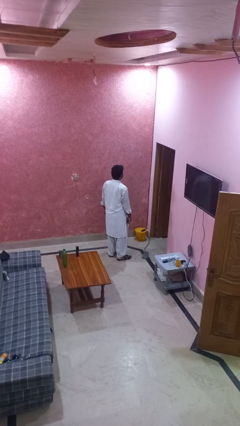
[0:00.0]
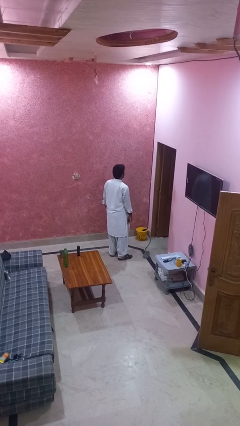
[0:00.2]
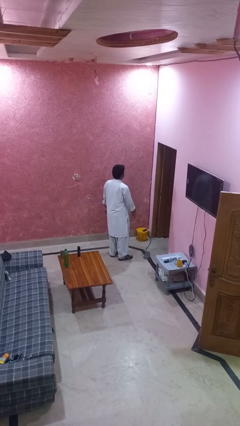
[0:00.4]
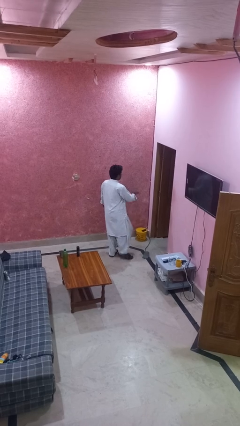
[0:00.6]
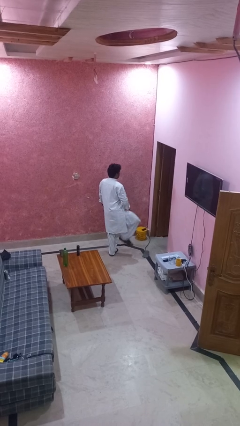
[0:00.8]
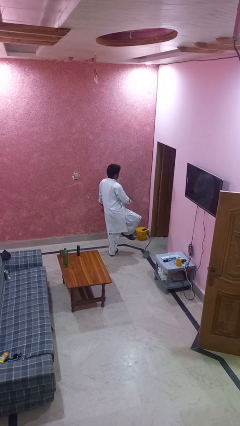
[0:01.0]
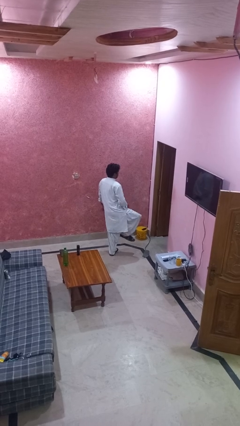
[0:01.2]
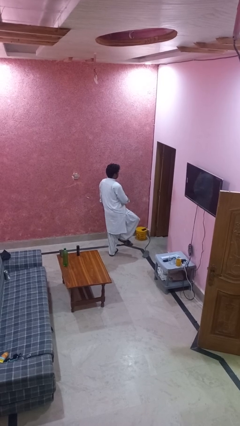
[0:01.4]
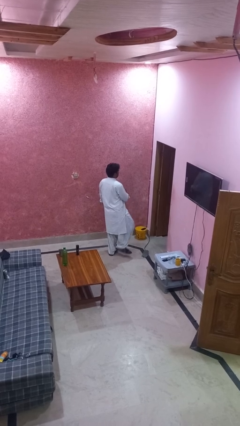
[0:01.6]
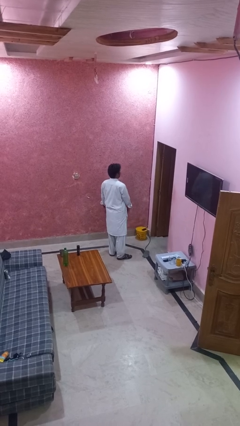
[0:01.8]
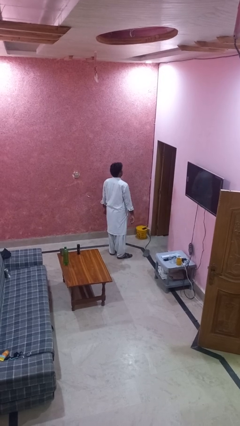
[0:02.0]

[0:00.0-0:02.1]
person slaps hands on thighs

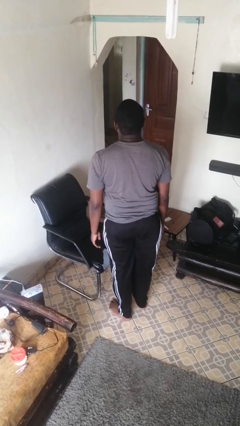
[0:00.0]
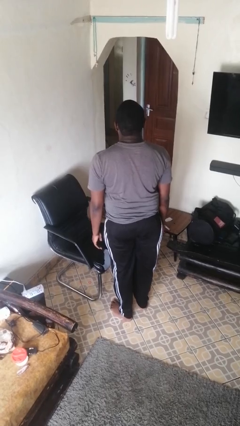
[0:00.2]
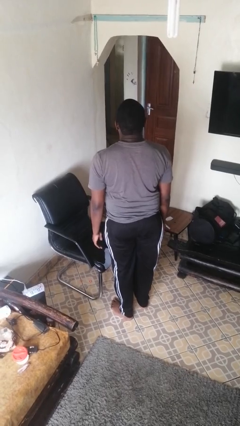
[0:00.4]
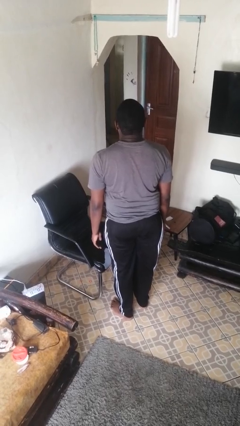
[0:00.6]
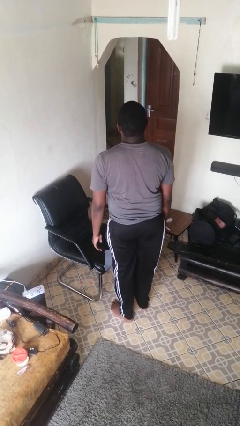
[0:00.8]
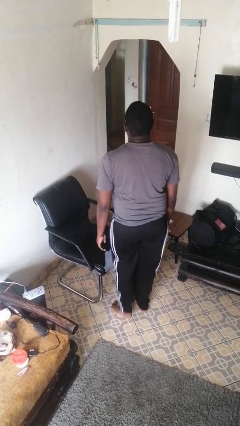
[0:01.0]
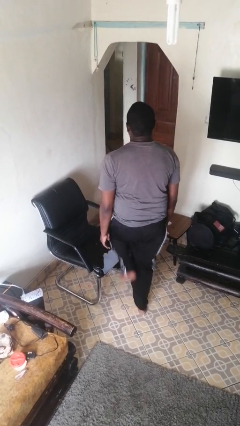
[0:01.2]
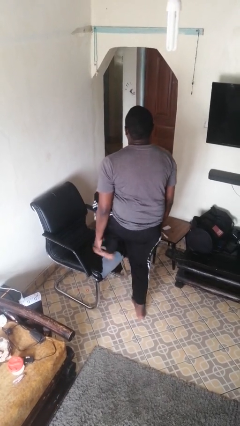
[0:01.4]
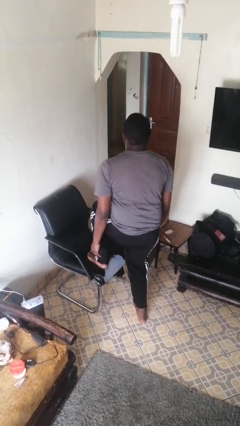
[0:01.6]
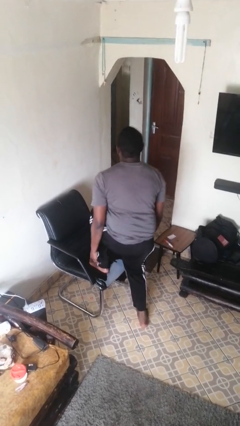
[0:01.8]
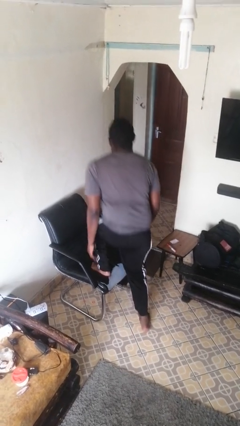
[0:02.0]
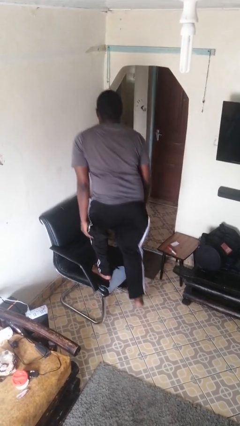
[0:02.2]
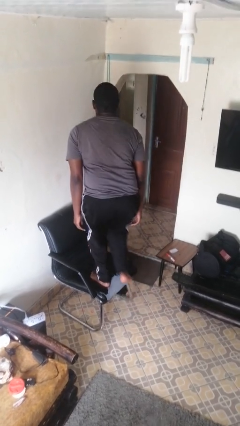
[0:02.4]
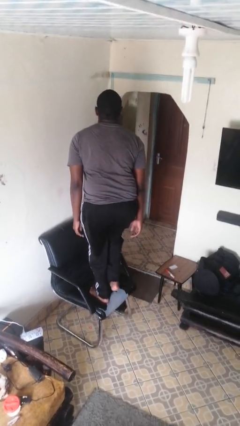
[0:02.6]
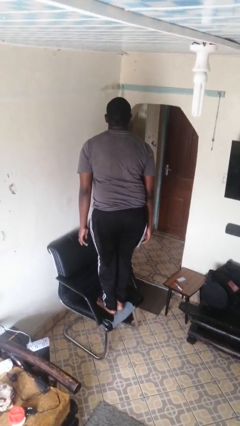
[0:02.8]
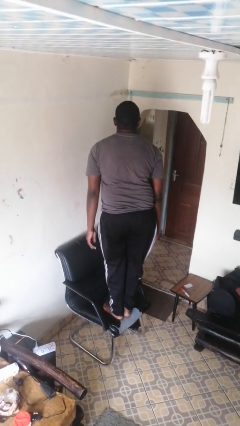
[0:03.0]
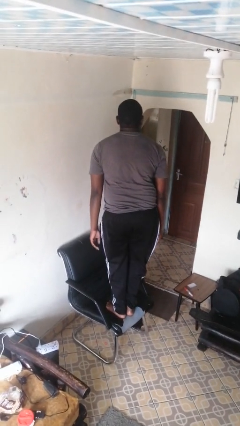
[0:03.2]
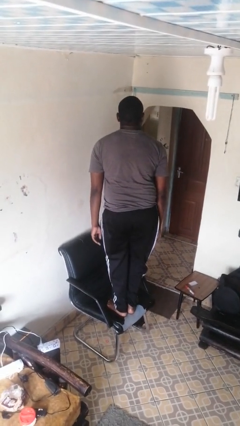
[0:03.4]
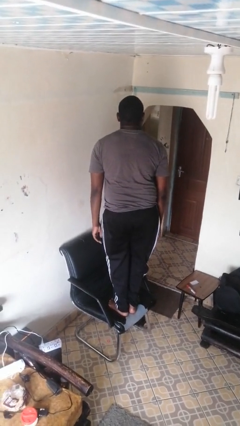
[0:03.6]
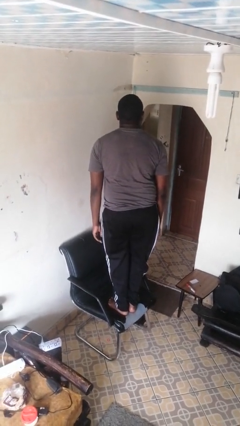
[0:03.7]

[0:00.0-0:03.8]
person climbs on chair

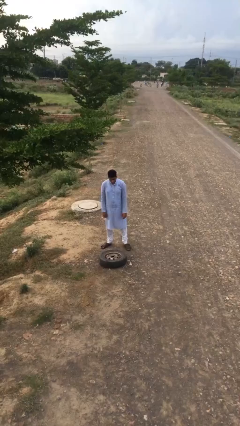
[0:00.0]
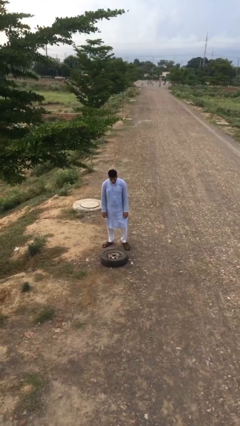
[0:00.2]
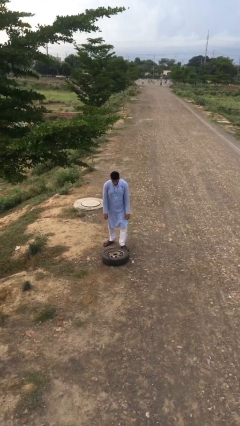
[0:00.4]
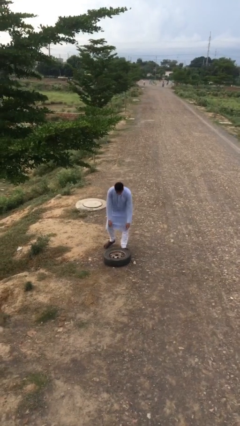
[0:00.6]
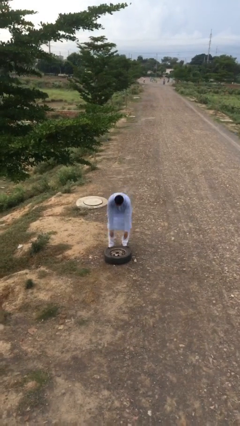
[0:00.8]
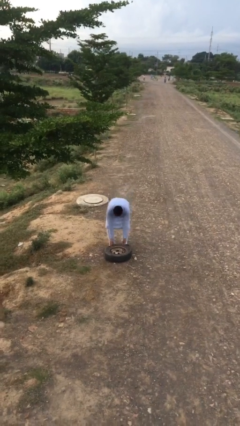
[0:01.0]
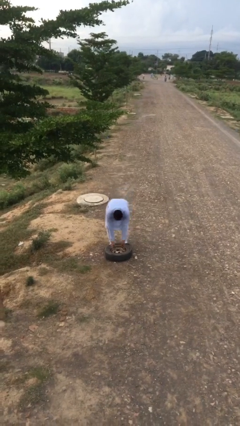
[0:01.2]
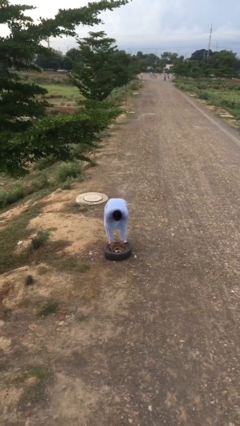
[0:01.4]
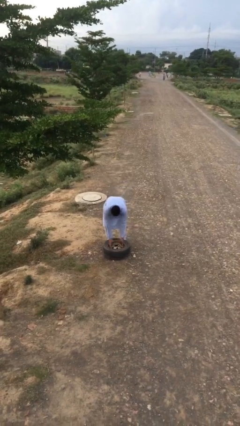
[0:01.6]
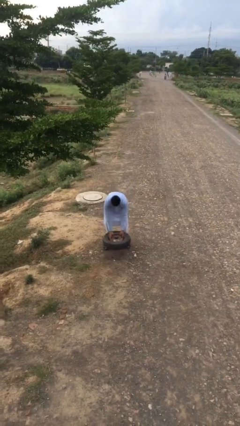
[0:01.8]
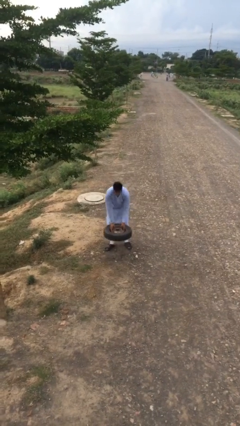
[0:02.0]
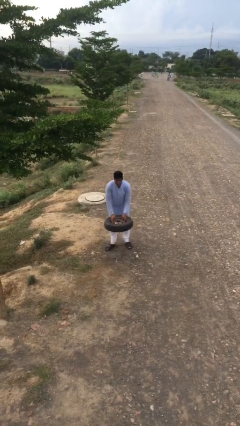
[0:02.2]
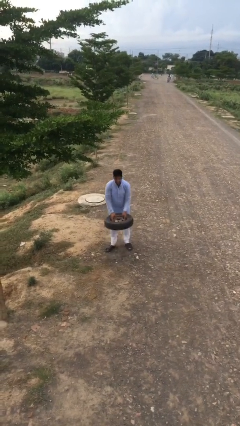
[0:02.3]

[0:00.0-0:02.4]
person picks up object from floor

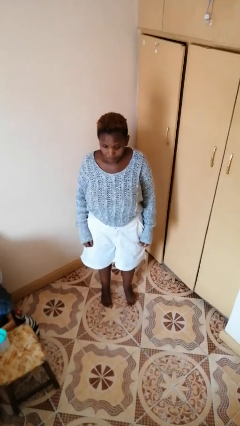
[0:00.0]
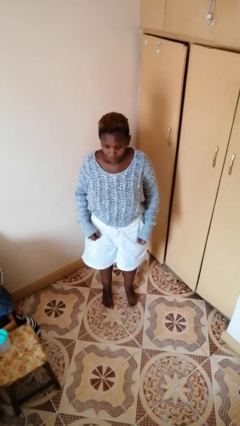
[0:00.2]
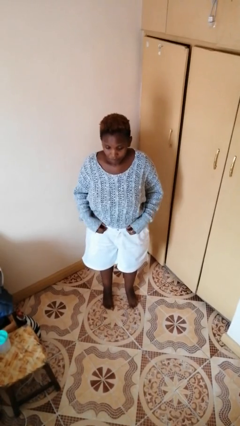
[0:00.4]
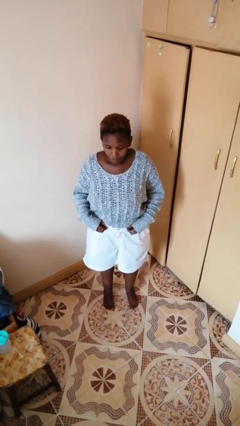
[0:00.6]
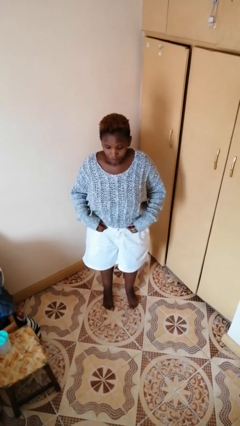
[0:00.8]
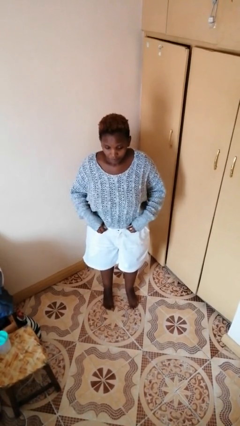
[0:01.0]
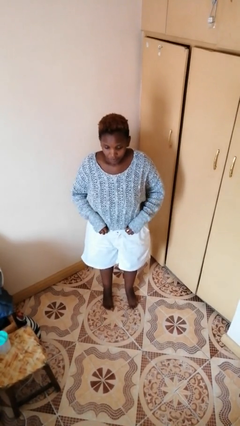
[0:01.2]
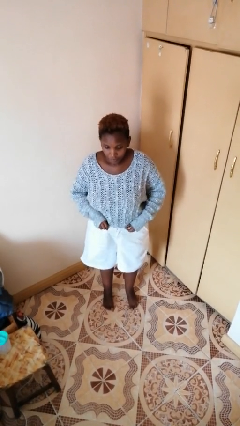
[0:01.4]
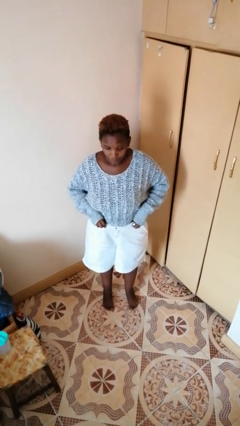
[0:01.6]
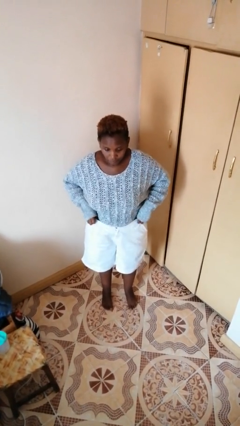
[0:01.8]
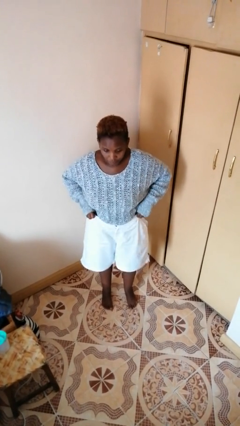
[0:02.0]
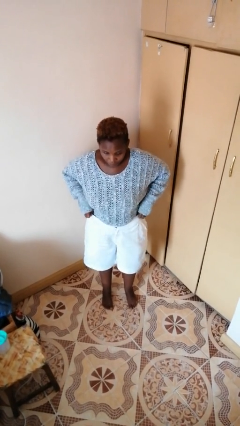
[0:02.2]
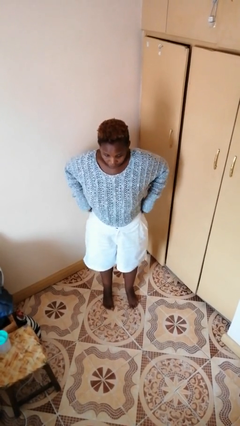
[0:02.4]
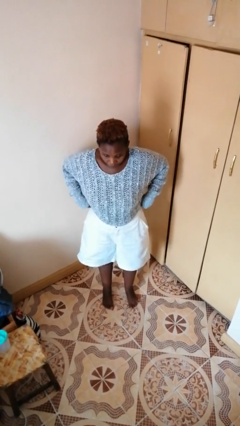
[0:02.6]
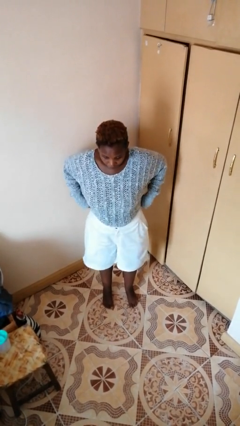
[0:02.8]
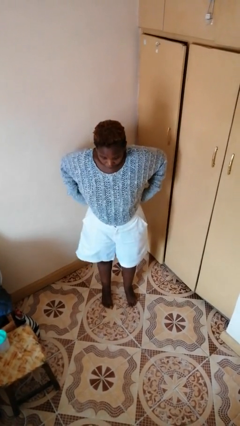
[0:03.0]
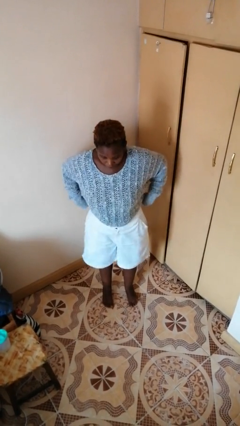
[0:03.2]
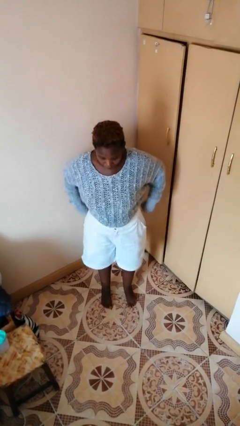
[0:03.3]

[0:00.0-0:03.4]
person hikes up pants

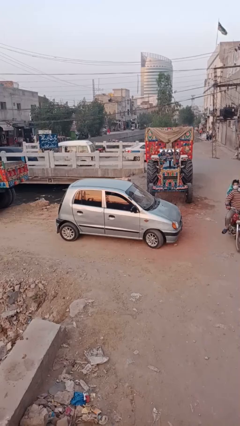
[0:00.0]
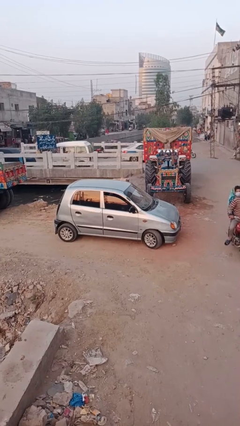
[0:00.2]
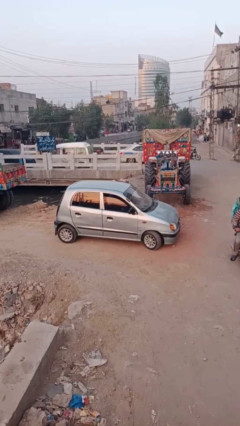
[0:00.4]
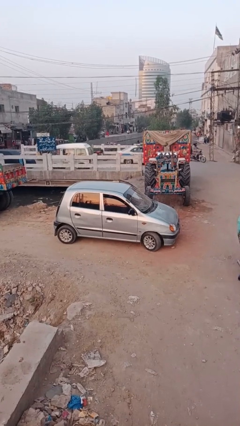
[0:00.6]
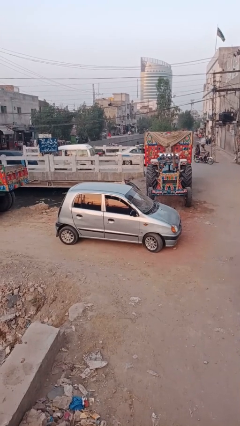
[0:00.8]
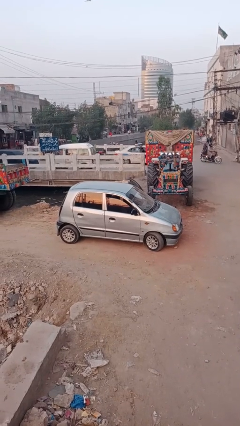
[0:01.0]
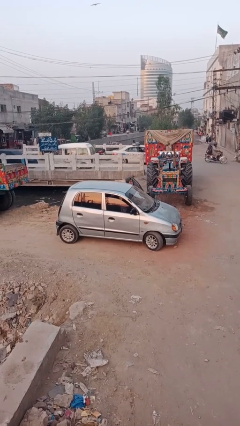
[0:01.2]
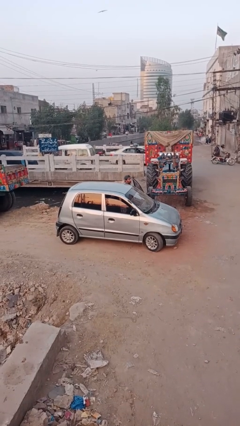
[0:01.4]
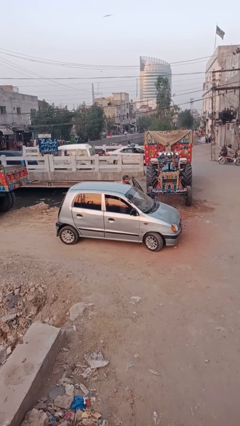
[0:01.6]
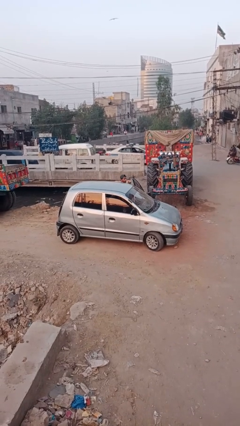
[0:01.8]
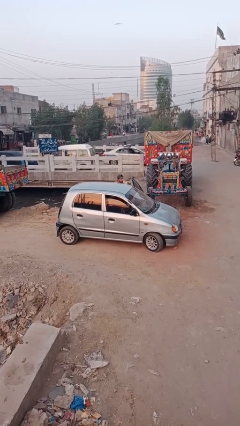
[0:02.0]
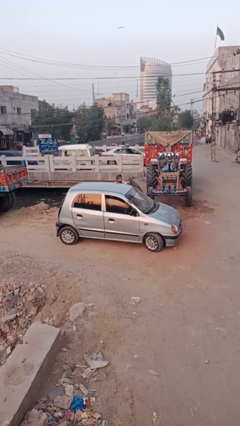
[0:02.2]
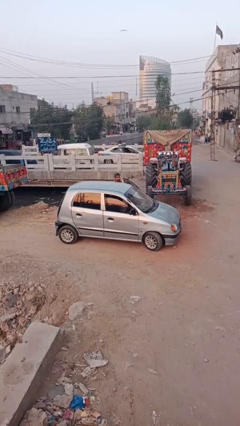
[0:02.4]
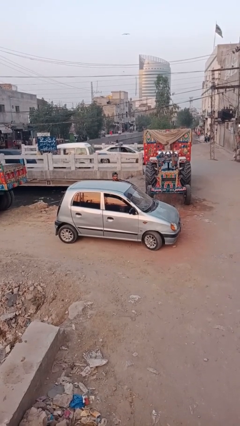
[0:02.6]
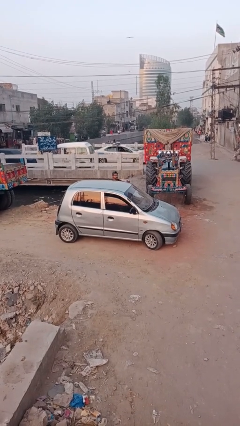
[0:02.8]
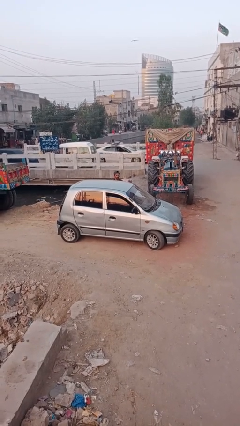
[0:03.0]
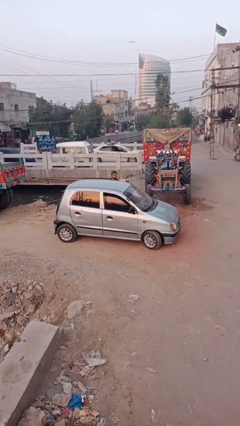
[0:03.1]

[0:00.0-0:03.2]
car drops off person

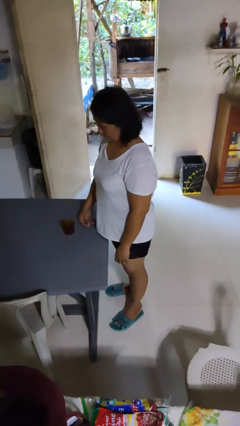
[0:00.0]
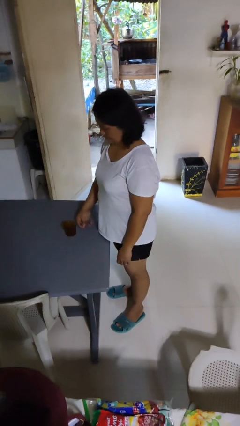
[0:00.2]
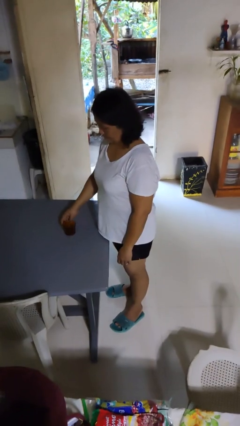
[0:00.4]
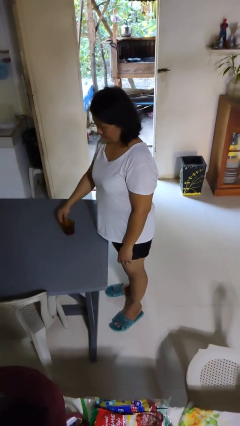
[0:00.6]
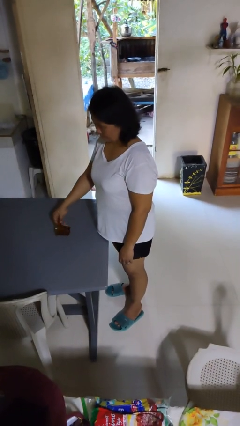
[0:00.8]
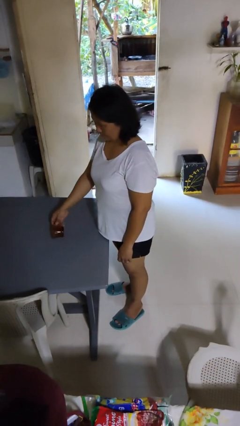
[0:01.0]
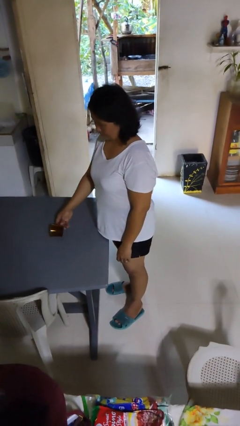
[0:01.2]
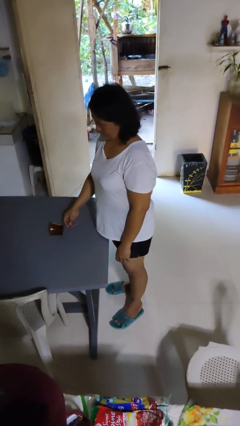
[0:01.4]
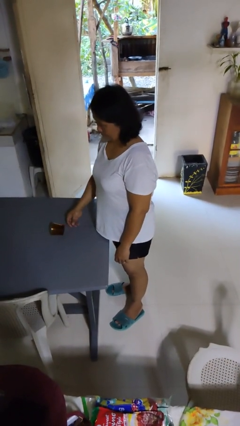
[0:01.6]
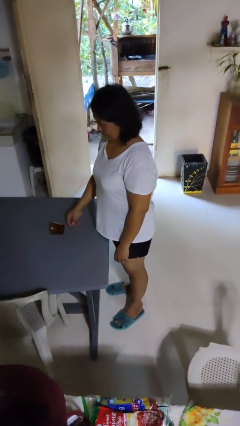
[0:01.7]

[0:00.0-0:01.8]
person knocks over glass

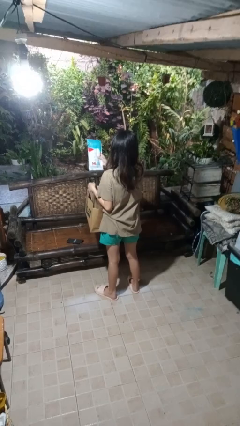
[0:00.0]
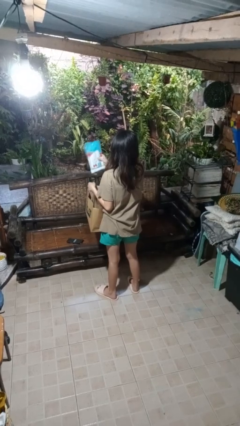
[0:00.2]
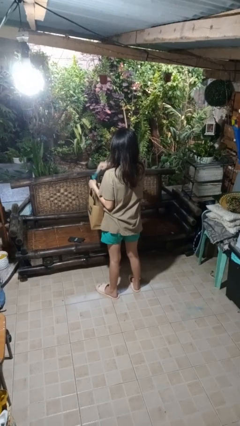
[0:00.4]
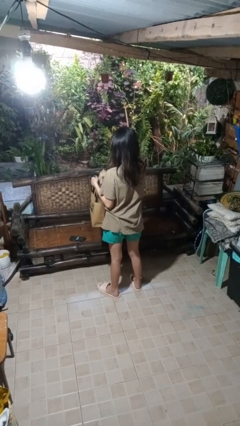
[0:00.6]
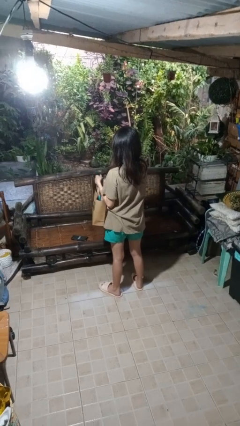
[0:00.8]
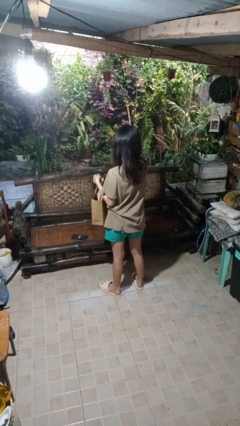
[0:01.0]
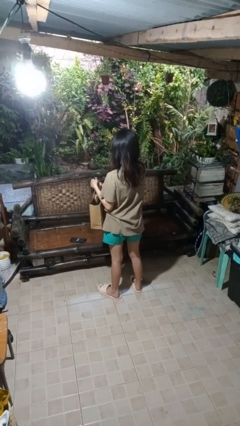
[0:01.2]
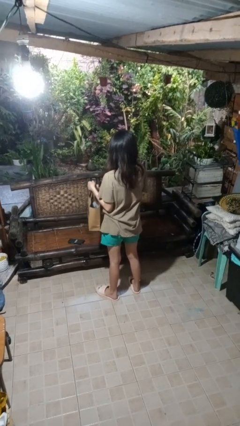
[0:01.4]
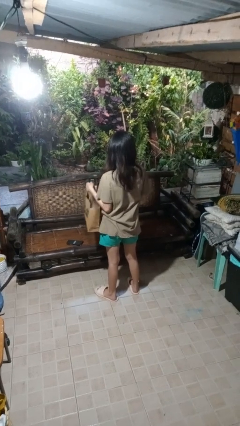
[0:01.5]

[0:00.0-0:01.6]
person puts object into bag
